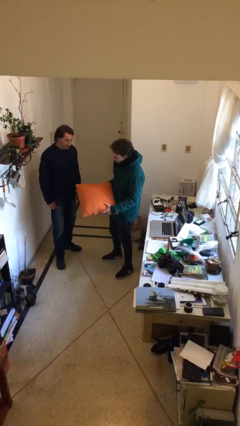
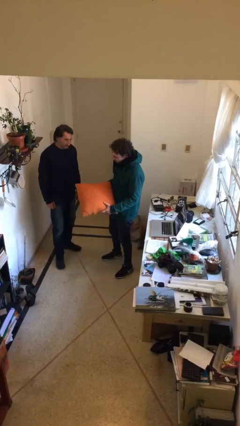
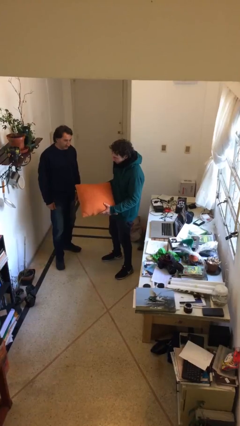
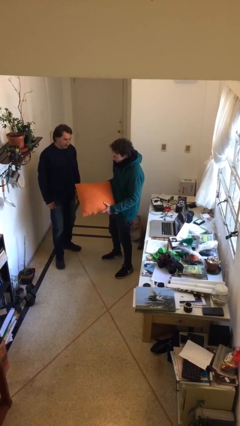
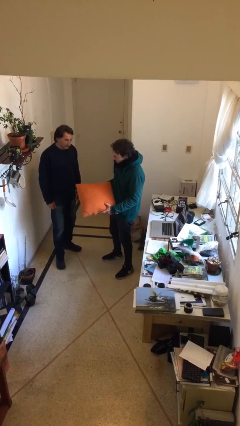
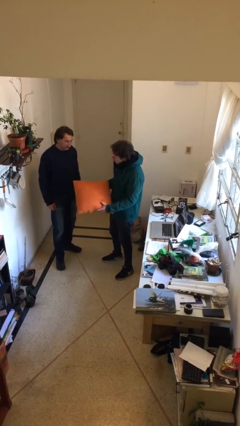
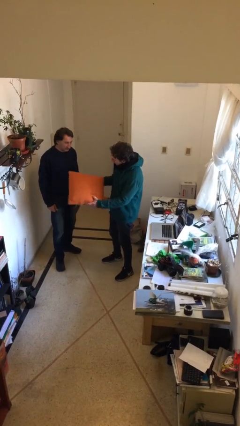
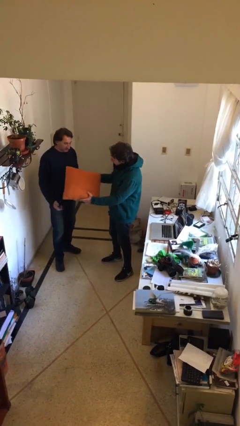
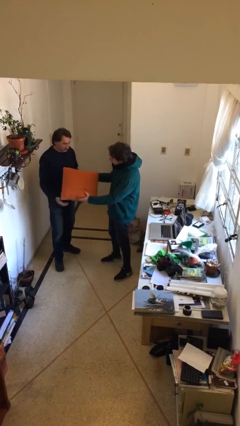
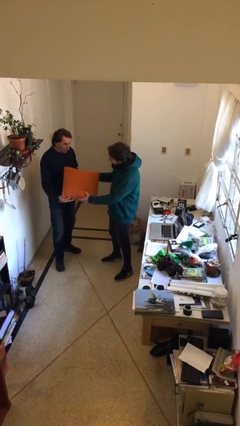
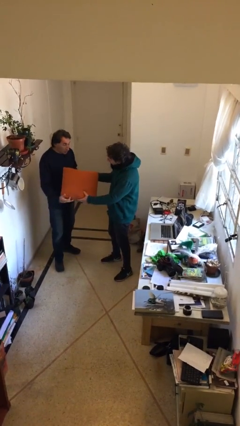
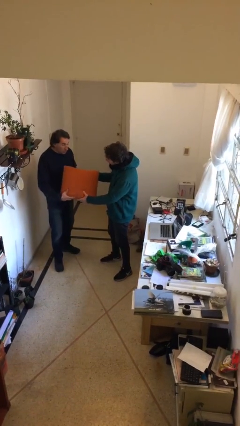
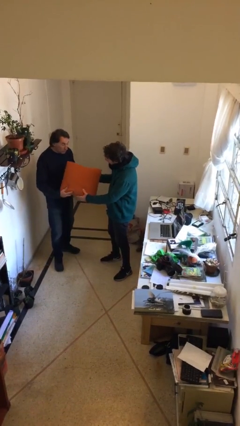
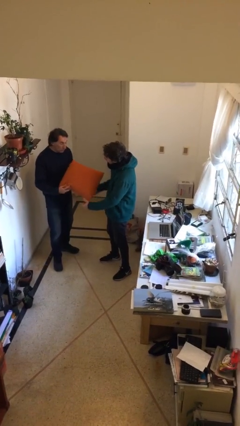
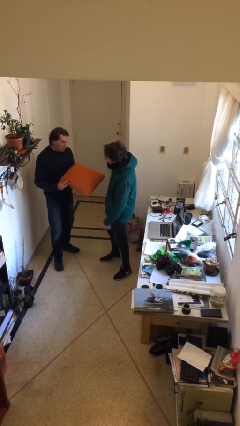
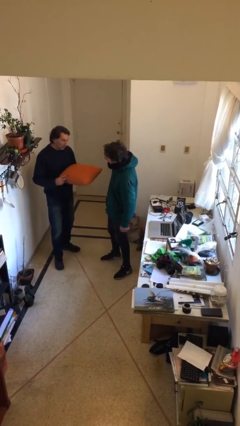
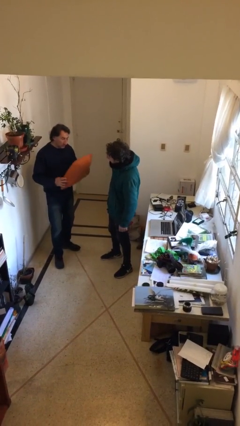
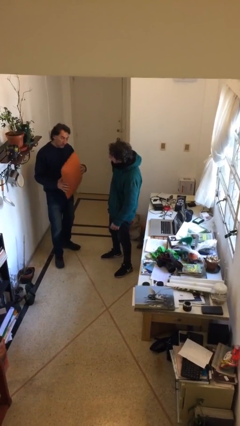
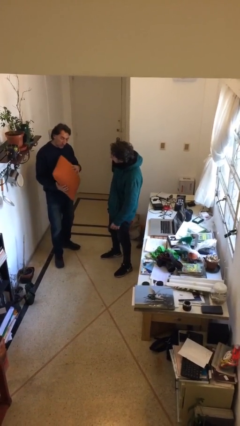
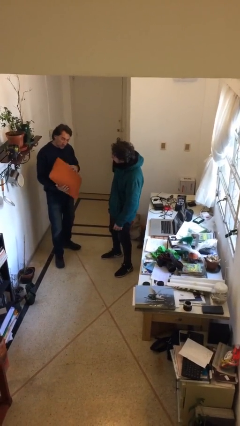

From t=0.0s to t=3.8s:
person transfers object to person

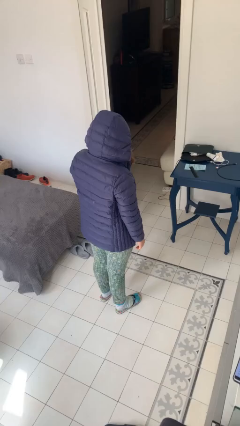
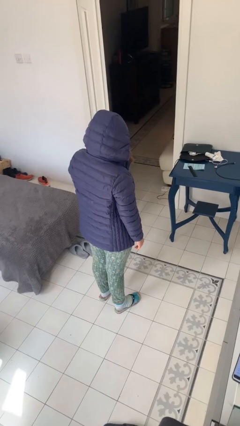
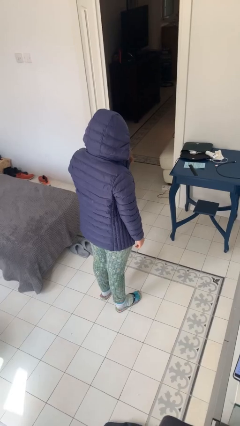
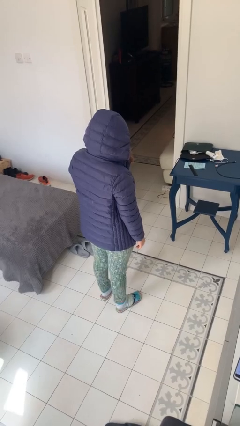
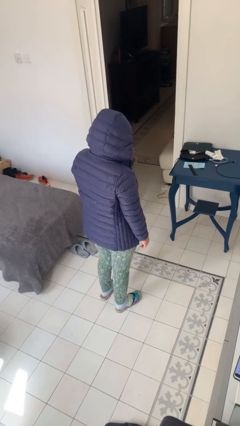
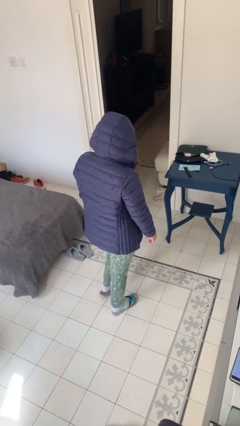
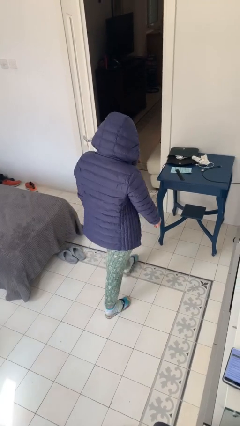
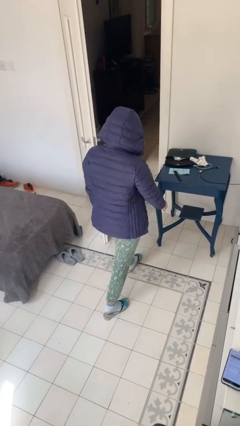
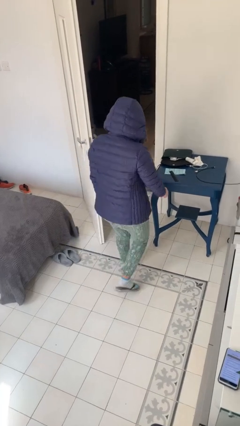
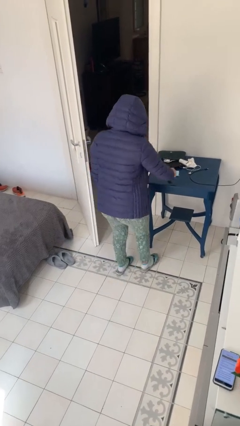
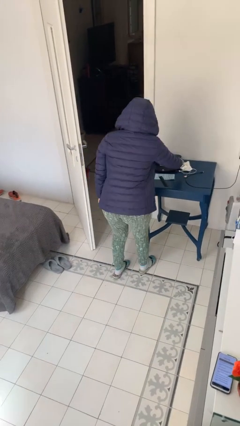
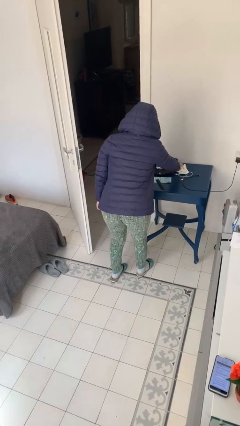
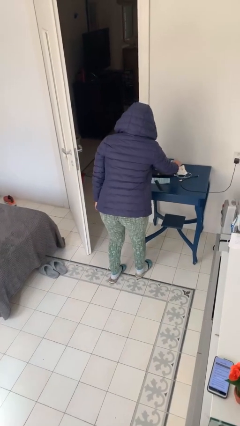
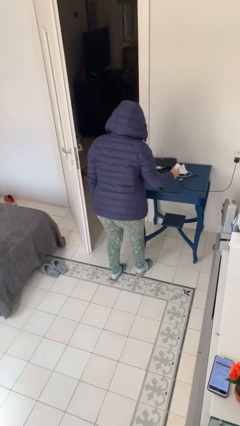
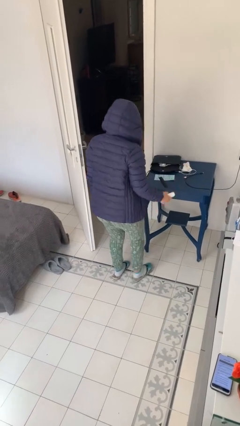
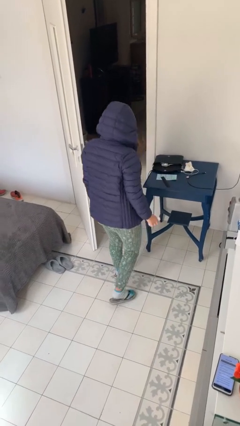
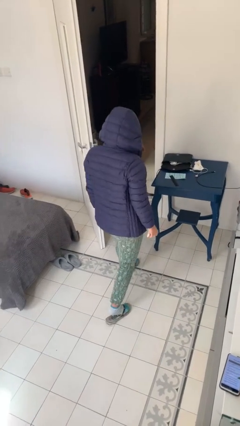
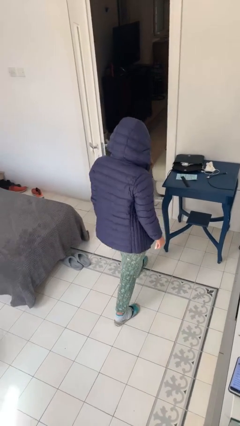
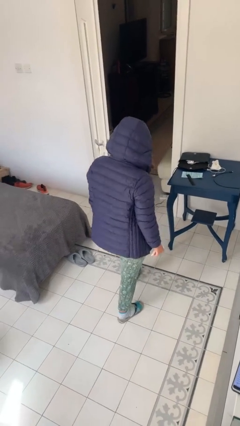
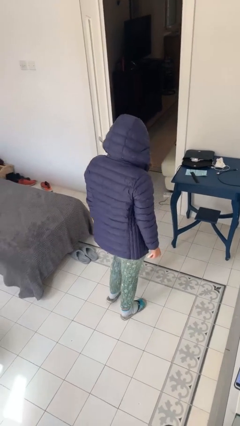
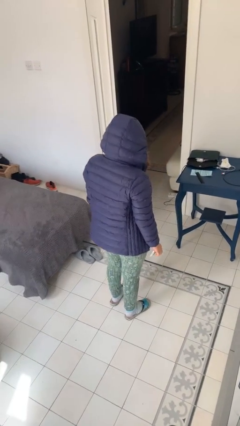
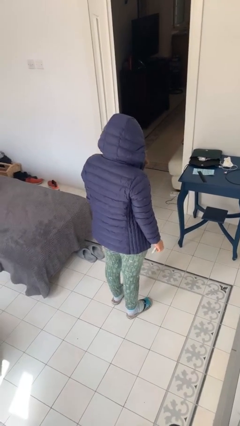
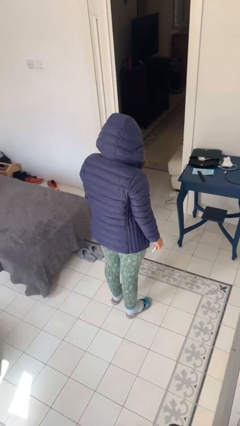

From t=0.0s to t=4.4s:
person picks up object from table

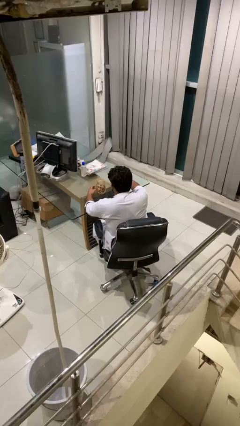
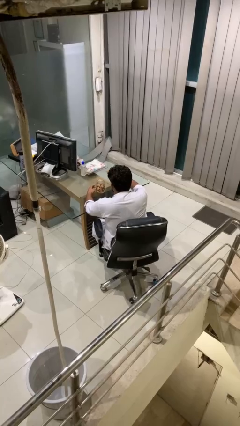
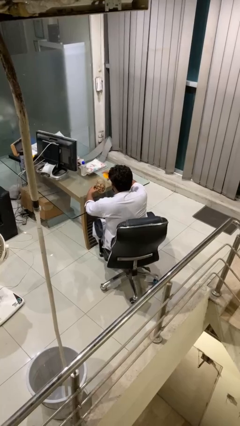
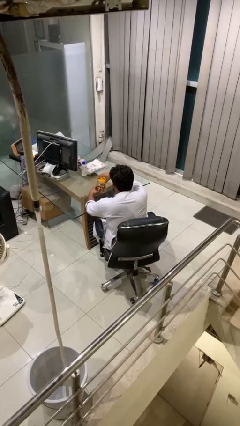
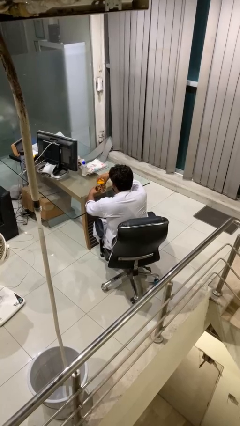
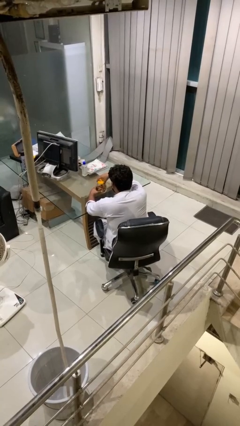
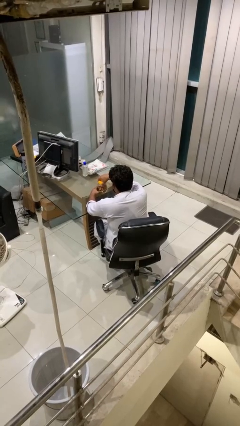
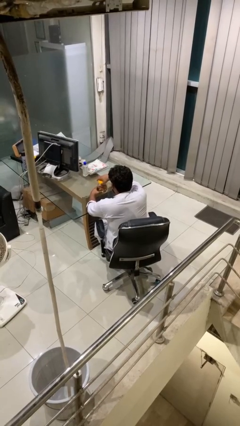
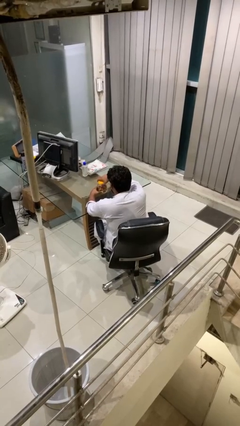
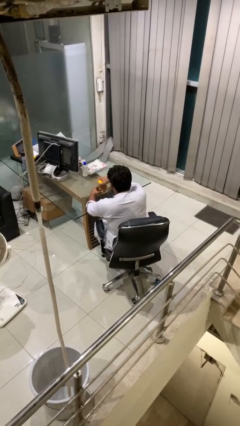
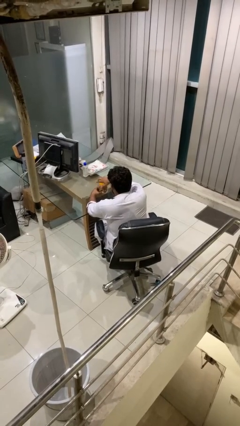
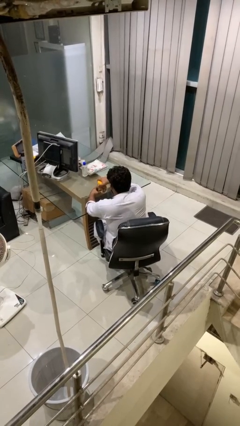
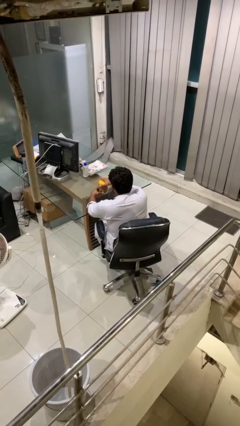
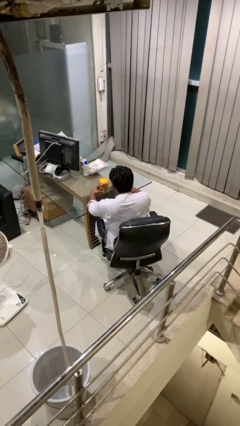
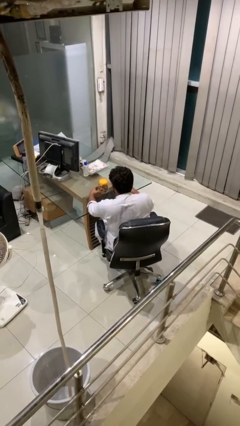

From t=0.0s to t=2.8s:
person closes jar

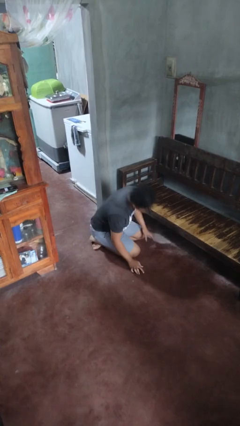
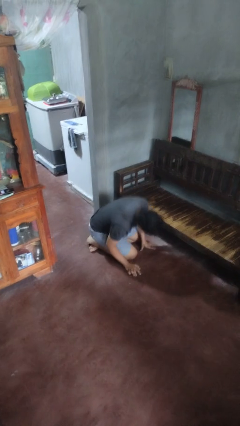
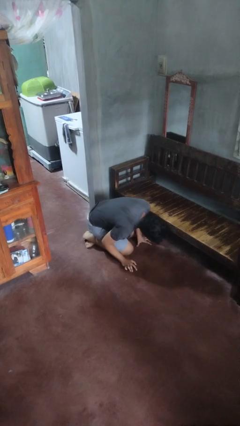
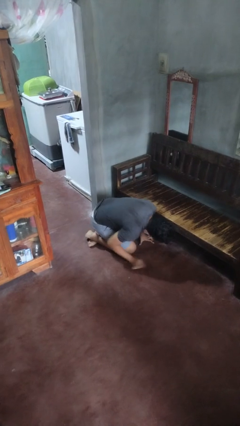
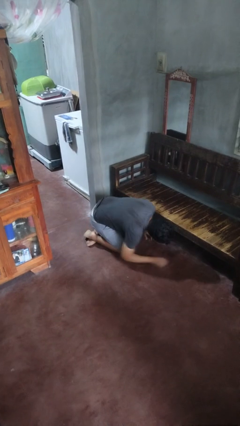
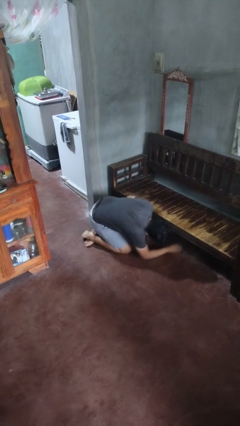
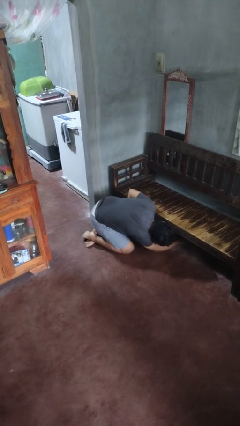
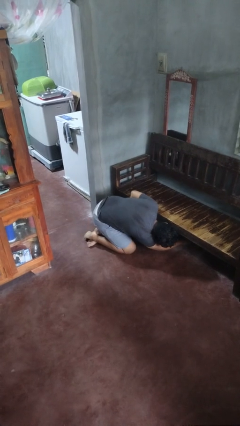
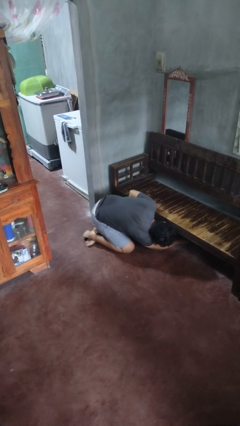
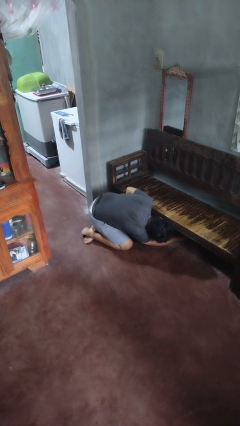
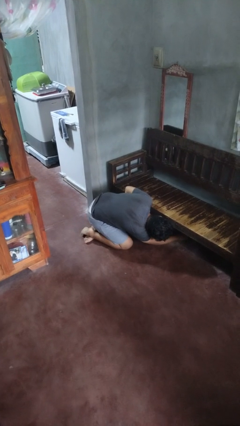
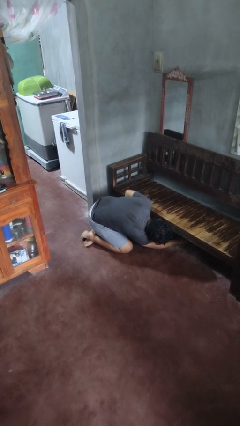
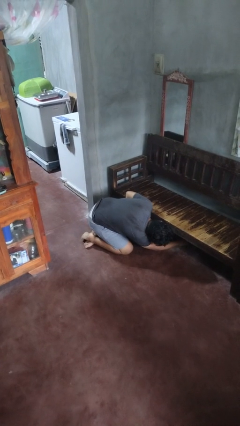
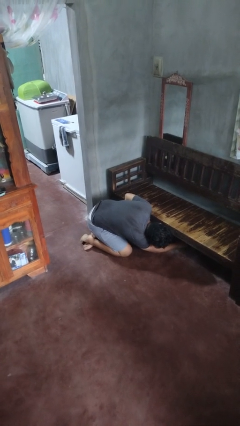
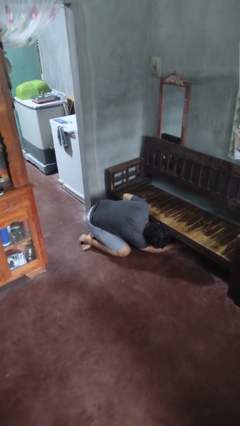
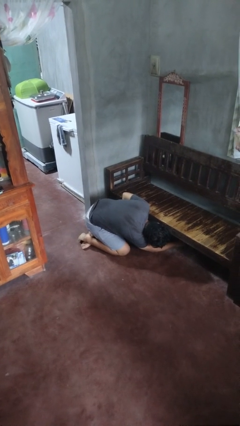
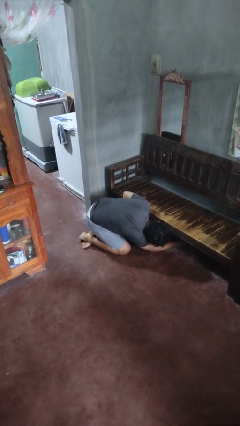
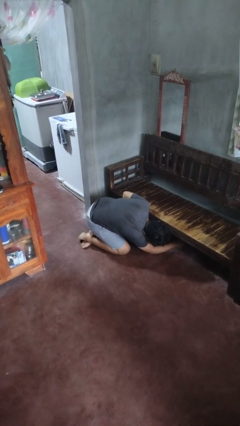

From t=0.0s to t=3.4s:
person searches under couch

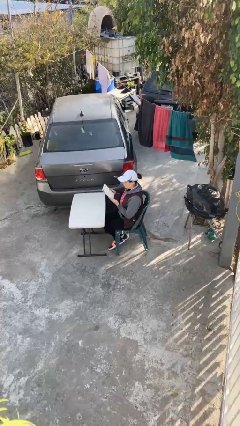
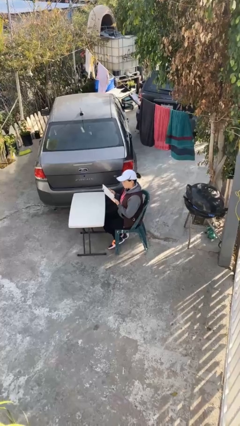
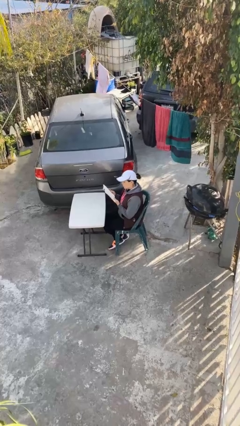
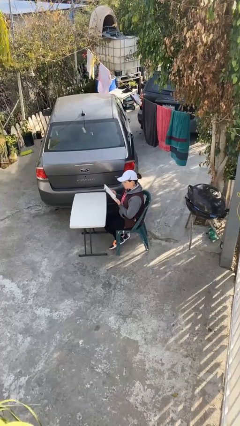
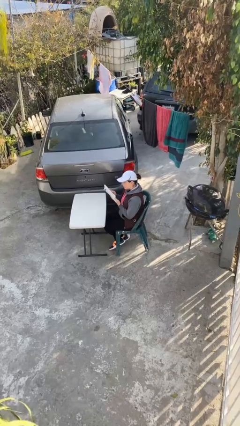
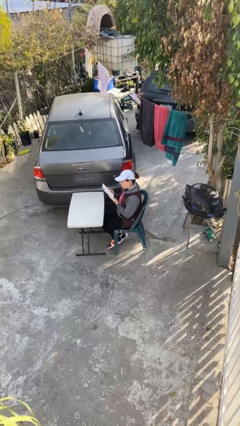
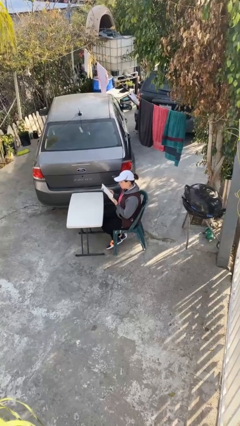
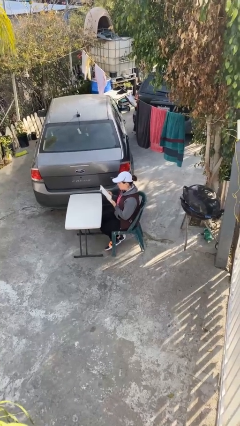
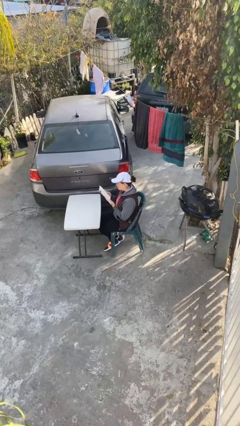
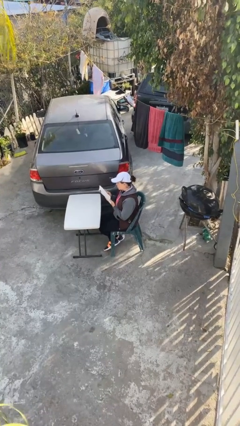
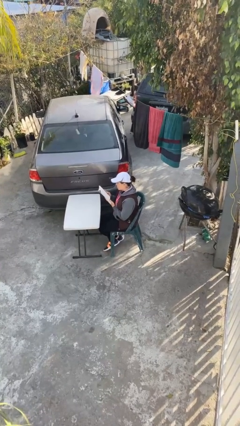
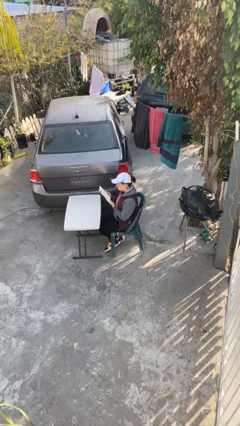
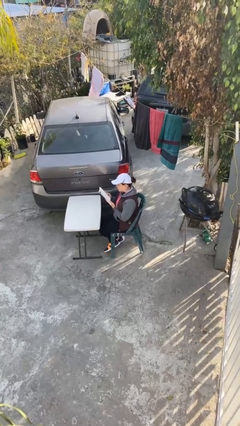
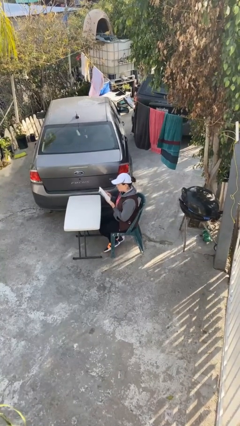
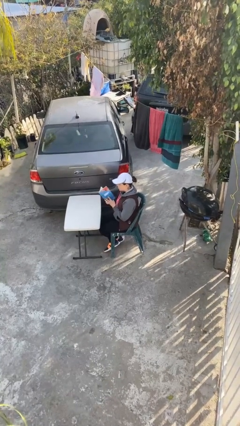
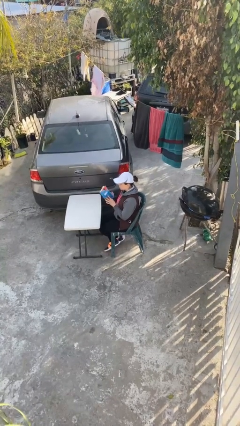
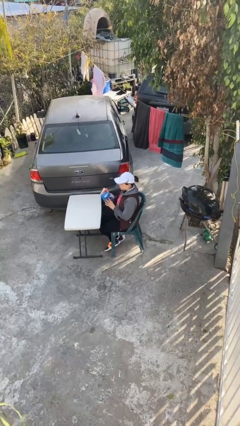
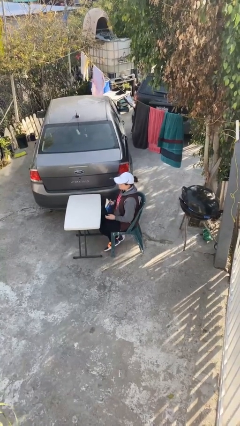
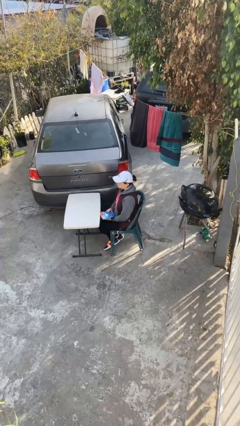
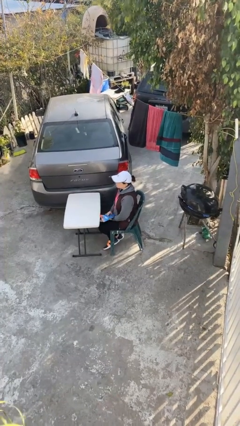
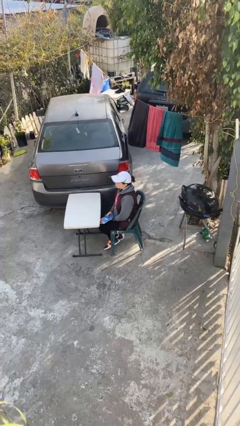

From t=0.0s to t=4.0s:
person reads document
